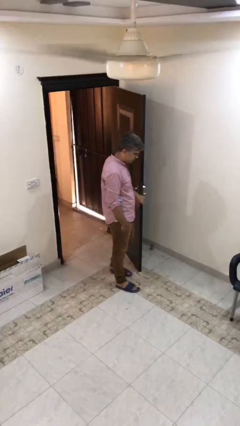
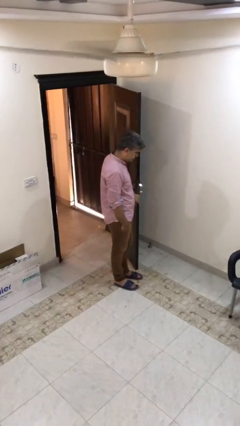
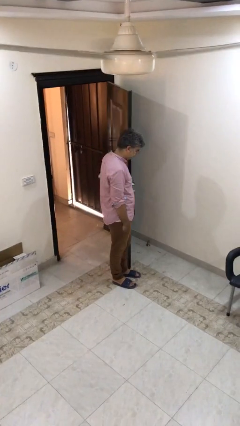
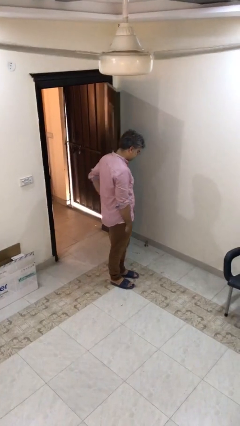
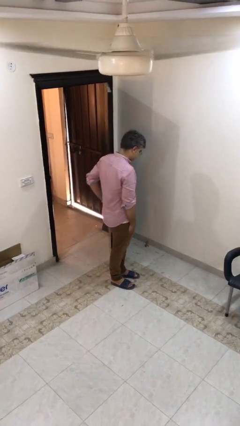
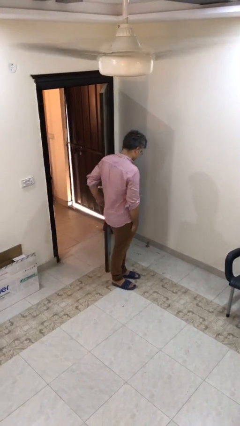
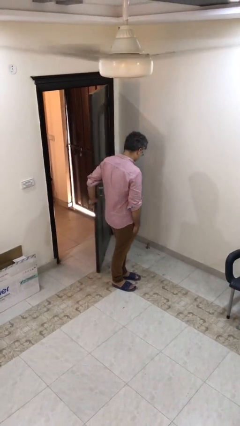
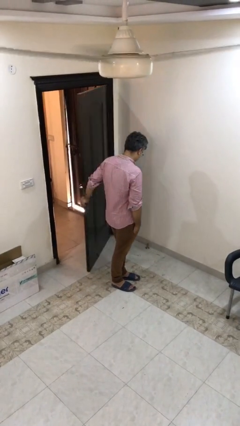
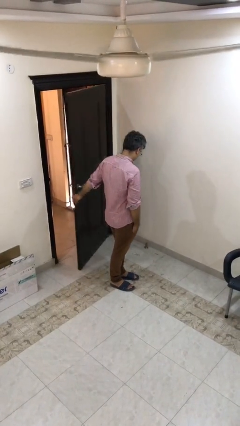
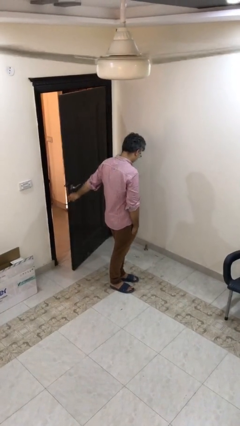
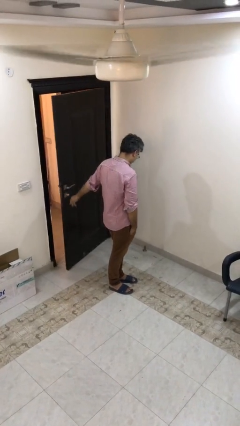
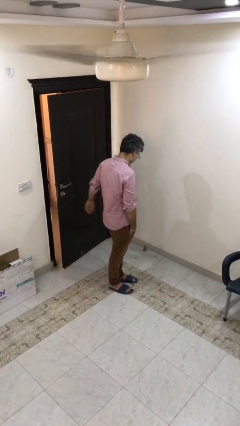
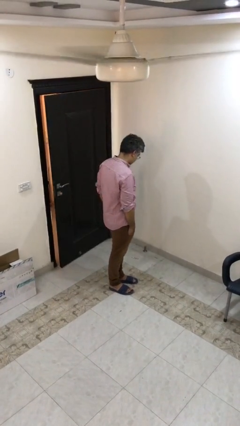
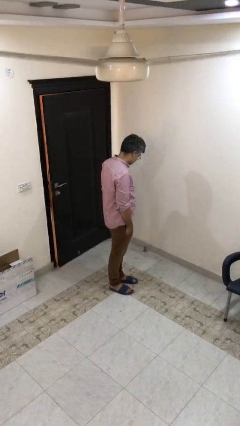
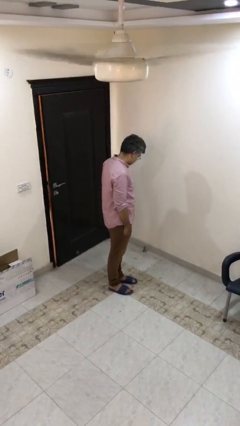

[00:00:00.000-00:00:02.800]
person closes facility door

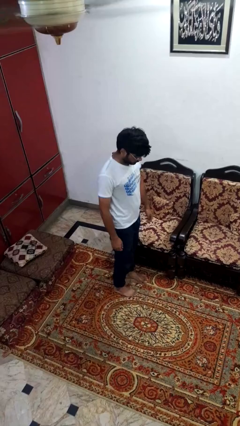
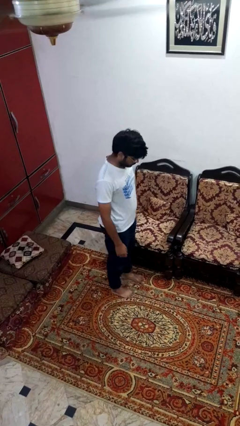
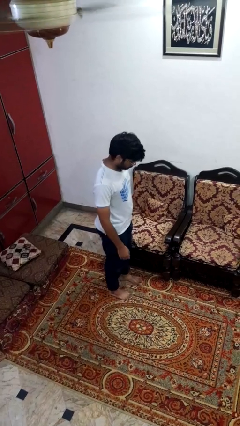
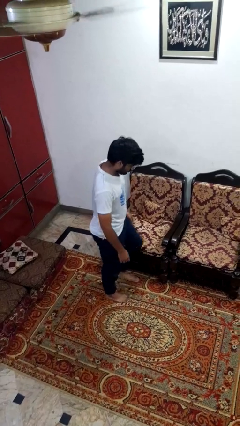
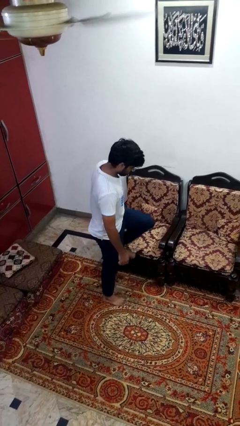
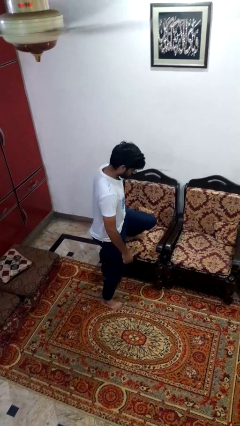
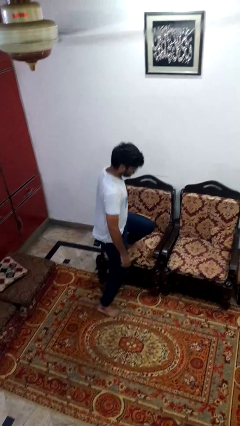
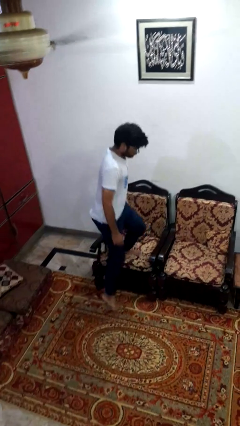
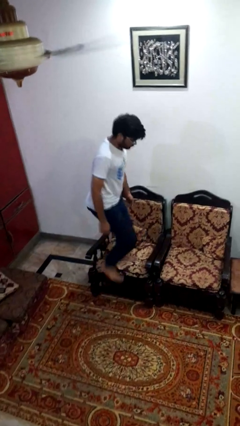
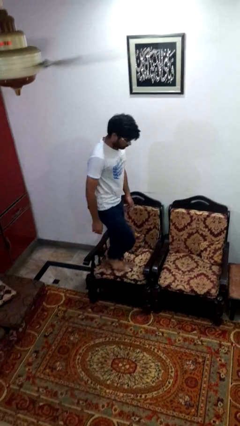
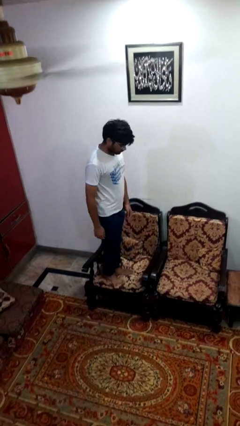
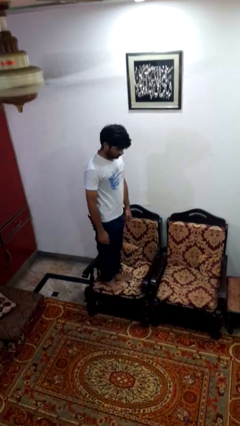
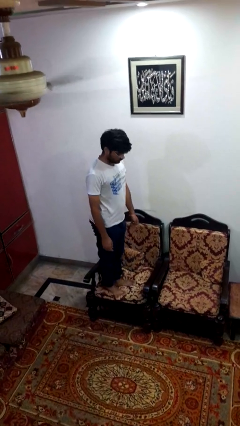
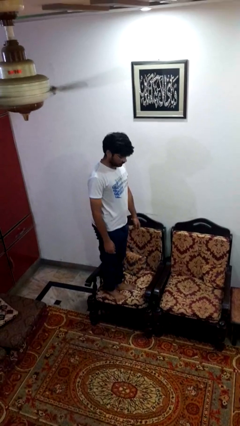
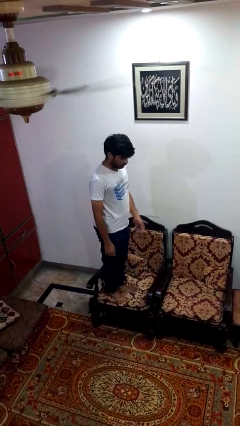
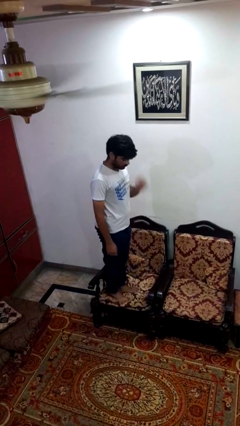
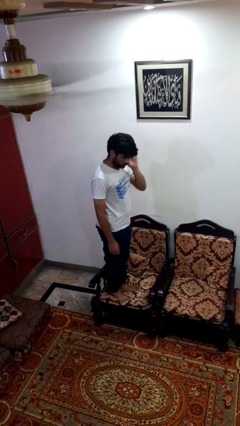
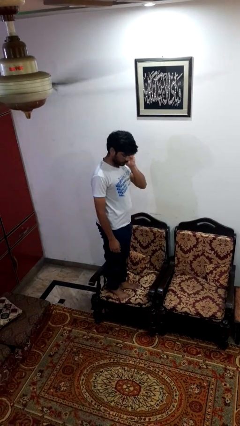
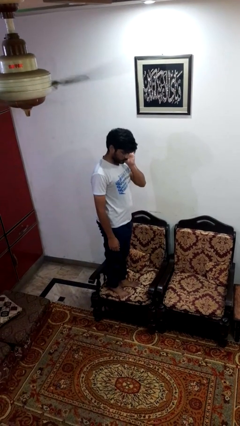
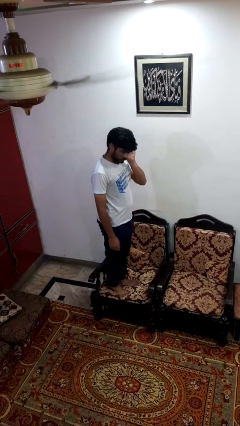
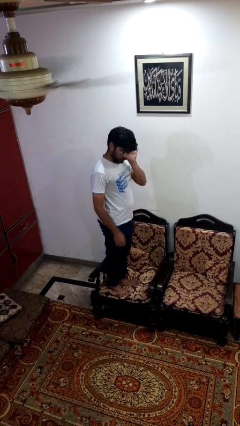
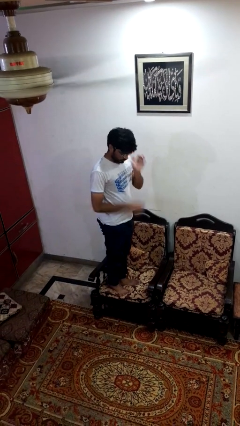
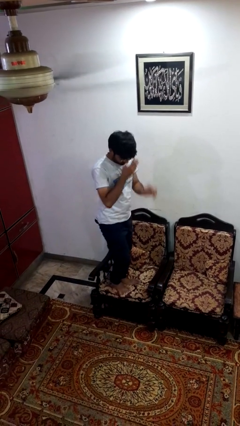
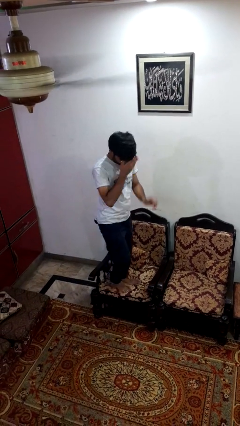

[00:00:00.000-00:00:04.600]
person climbs on couch

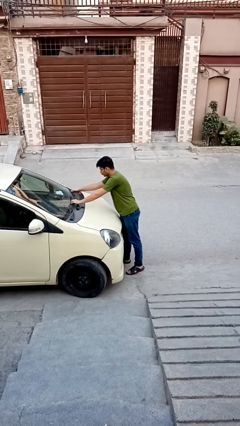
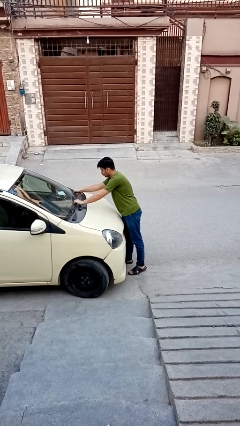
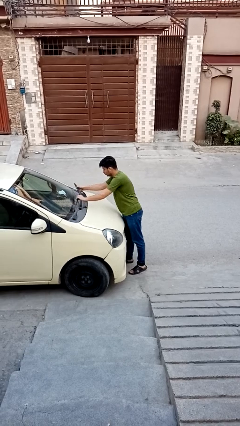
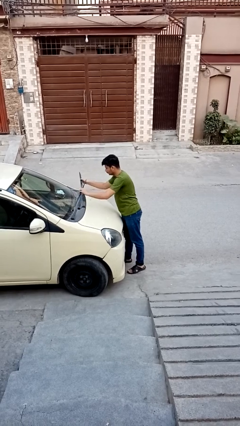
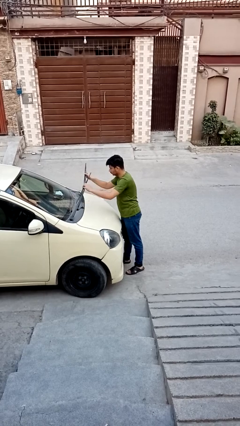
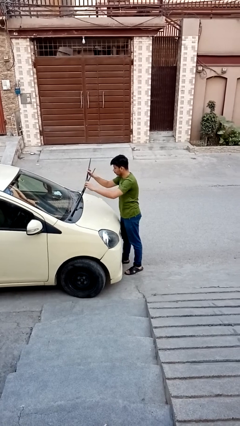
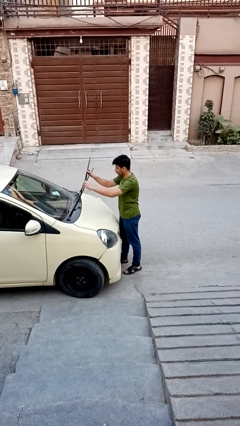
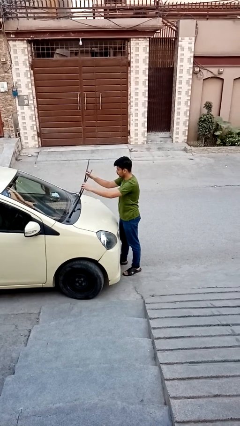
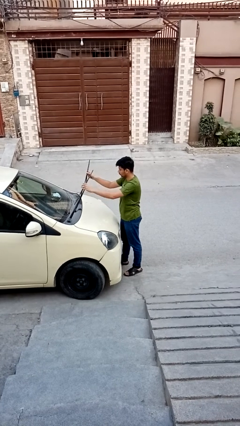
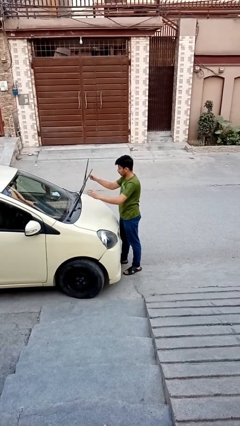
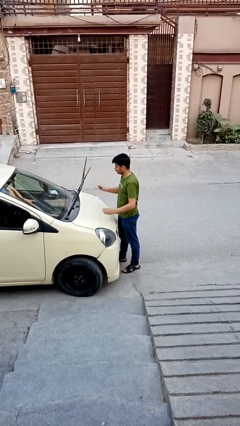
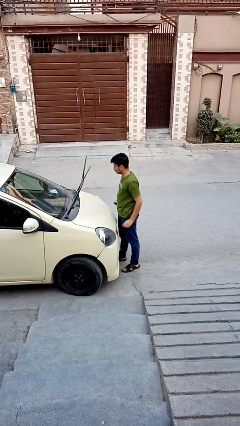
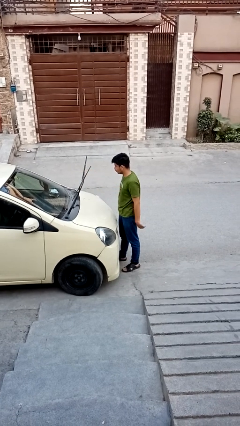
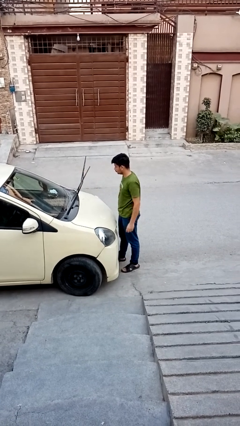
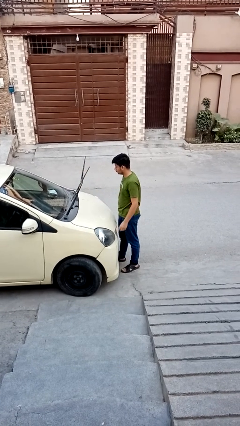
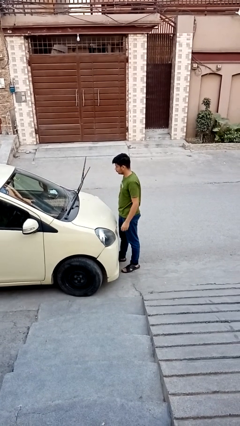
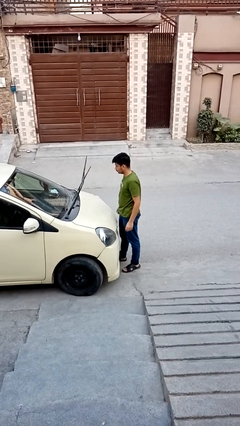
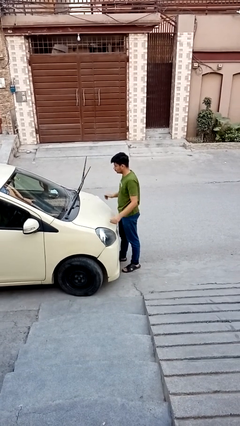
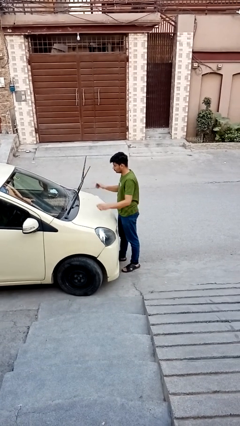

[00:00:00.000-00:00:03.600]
person flips up car wipers

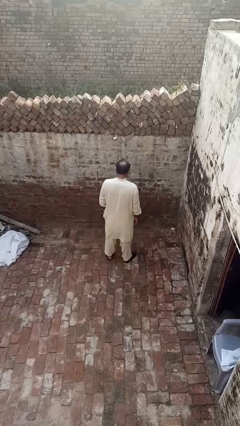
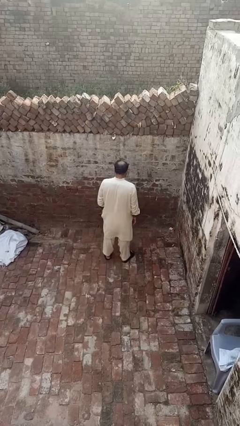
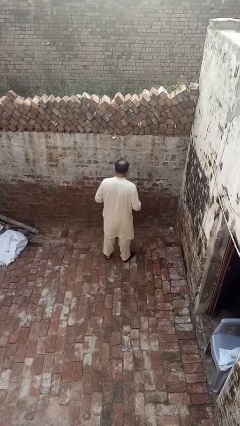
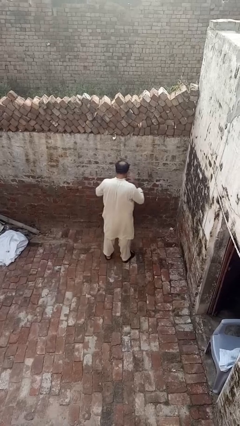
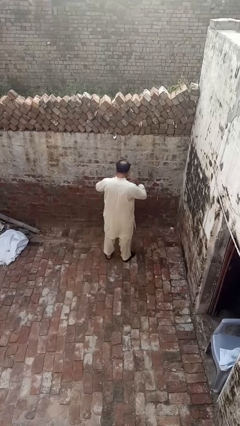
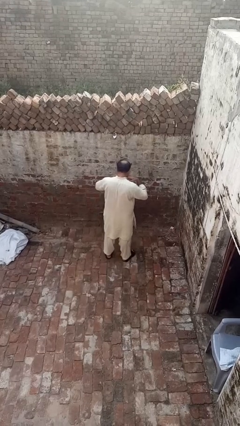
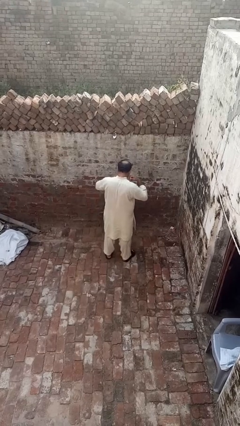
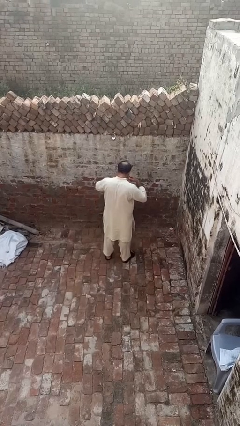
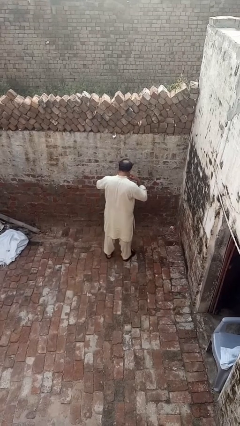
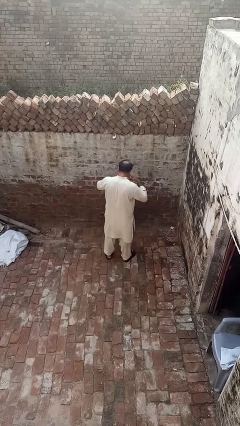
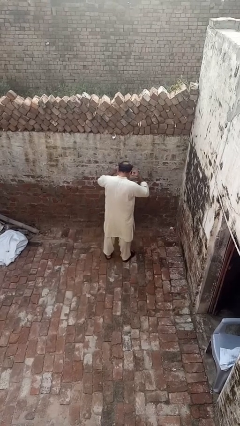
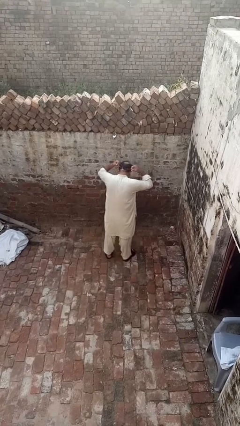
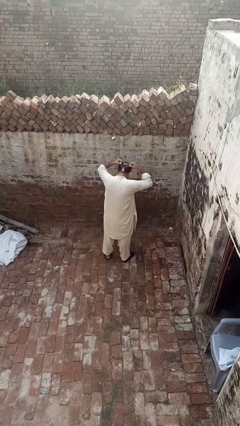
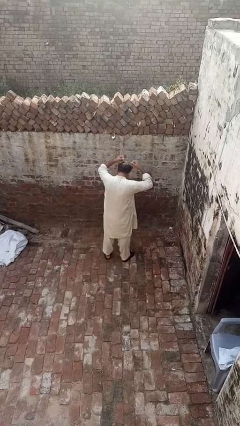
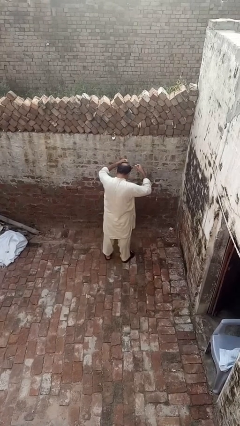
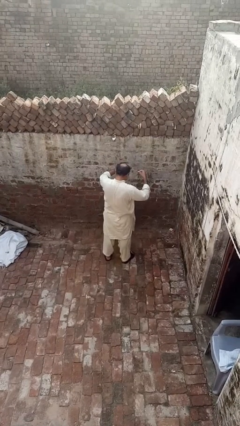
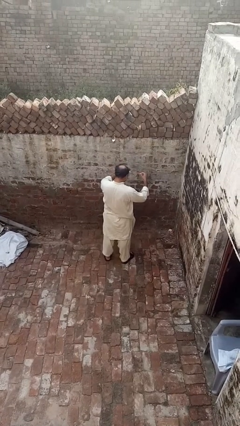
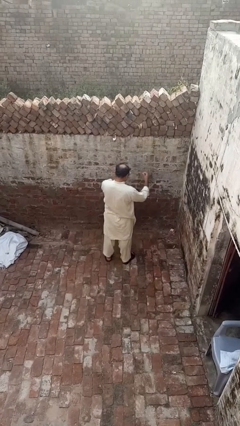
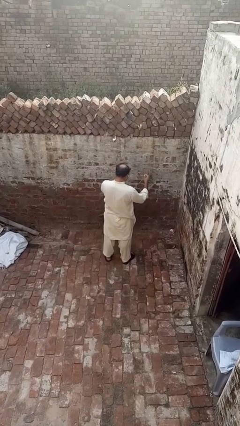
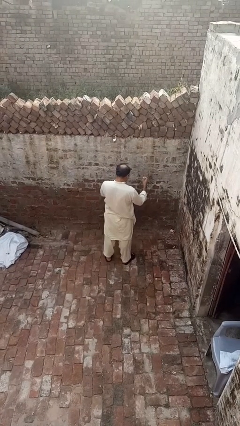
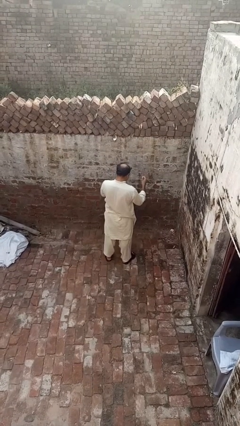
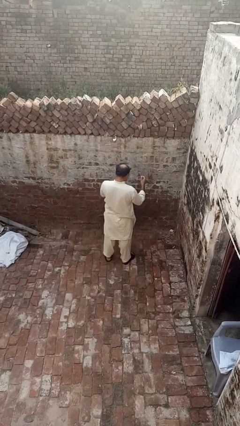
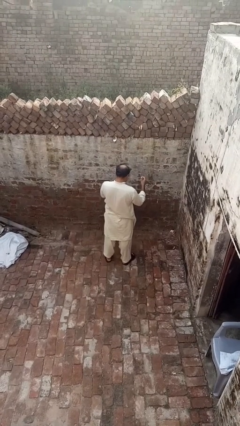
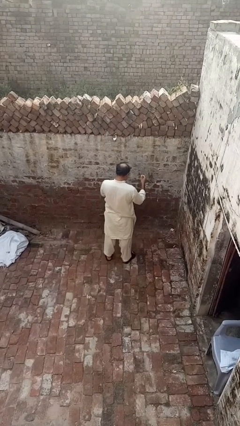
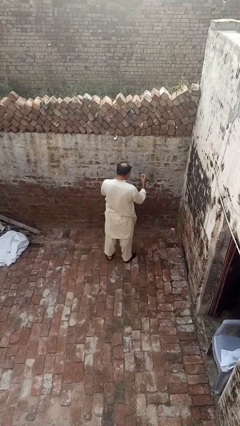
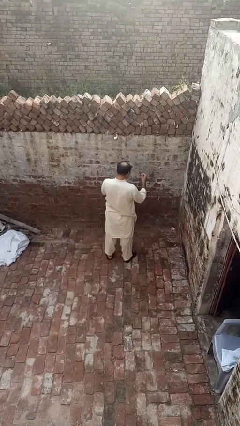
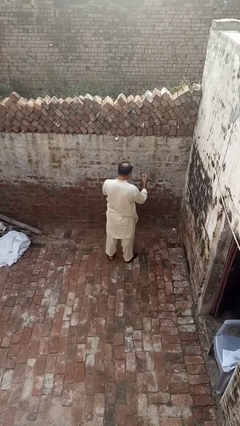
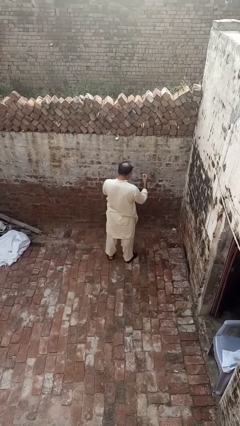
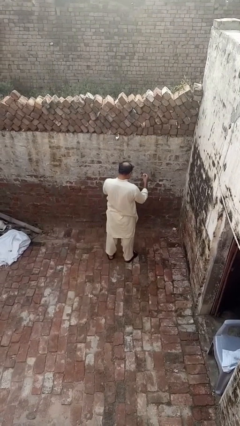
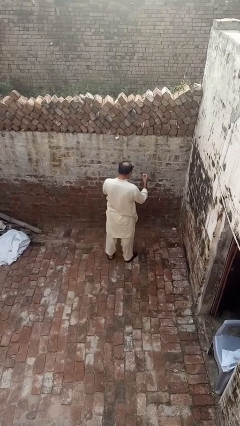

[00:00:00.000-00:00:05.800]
person takes off necklace

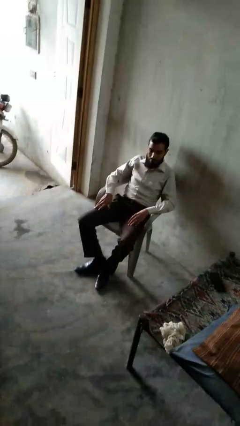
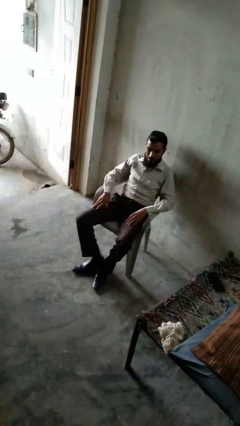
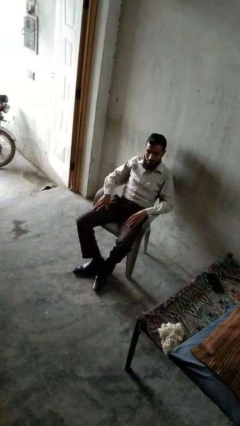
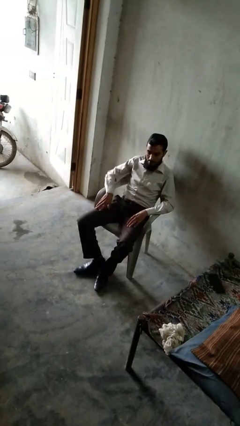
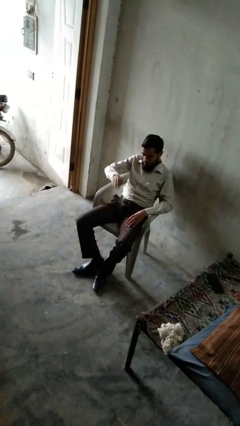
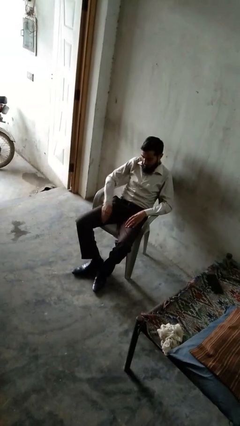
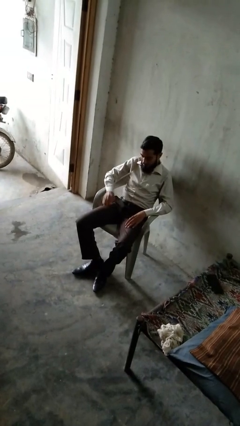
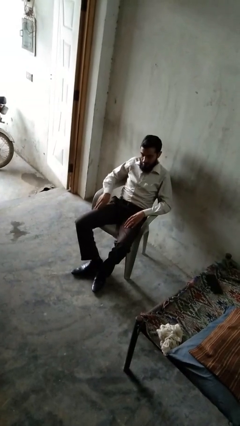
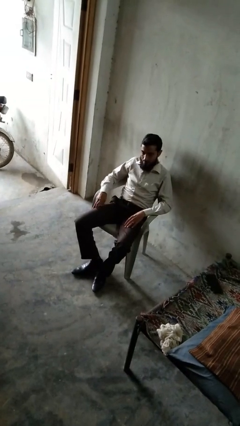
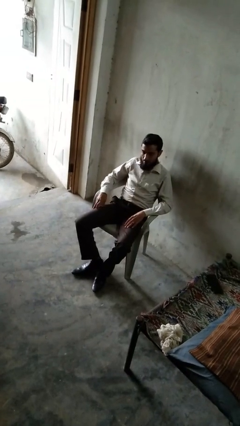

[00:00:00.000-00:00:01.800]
person slaps hands on thighs
